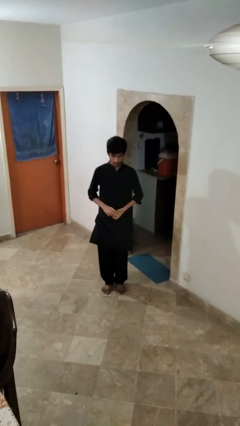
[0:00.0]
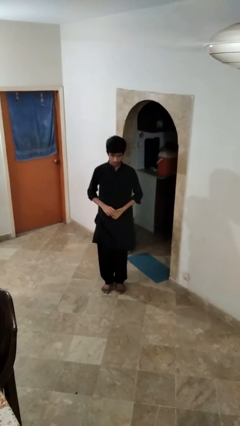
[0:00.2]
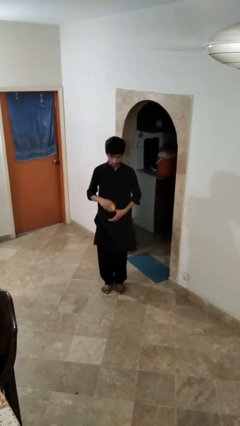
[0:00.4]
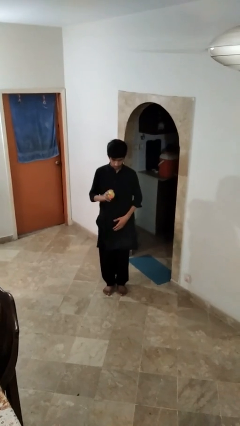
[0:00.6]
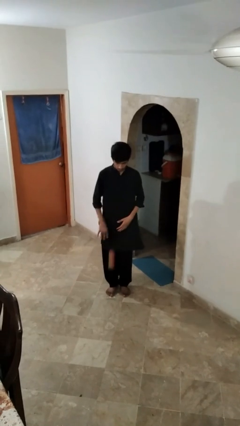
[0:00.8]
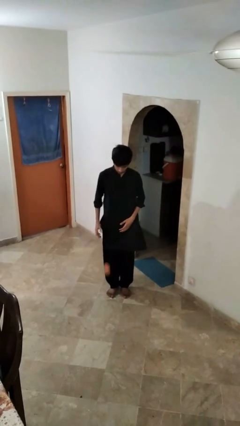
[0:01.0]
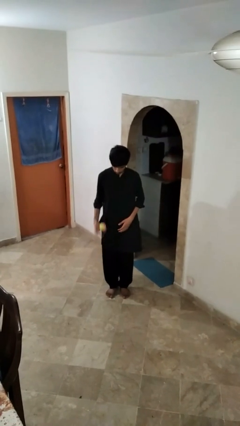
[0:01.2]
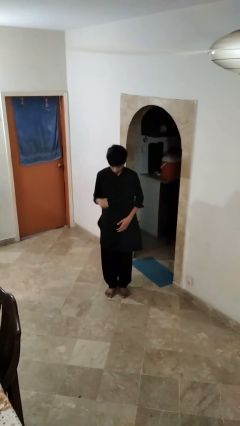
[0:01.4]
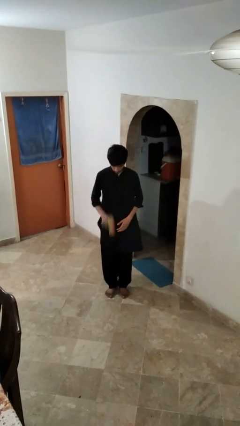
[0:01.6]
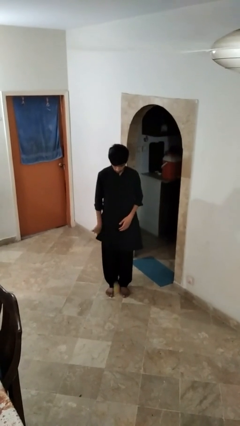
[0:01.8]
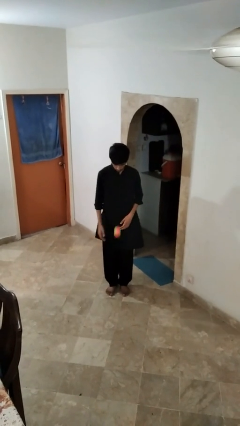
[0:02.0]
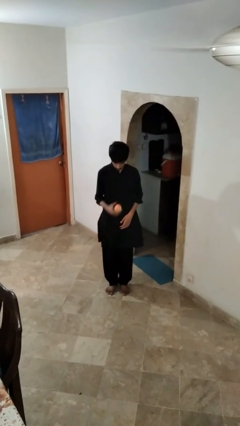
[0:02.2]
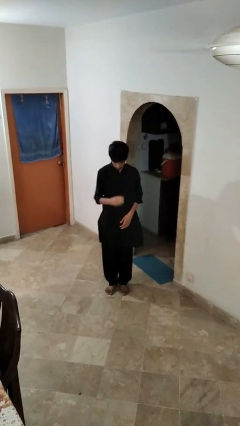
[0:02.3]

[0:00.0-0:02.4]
person bounces ball on floor

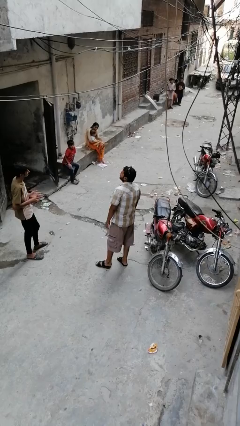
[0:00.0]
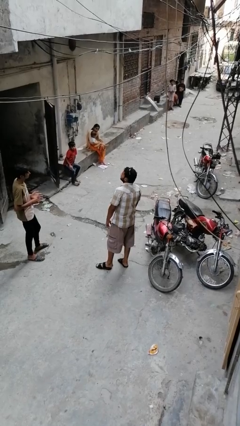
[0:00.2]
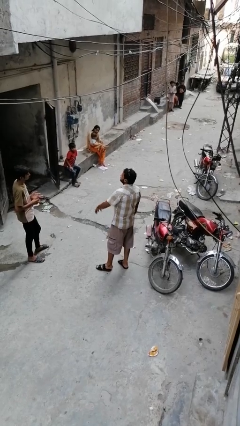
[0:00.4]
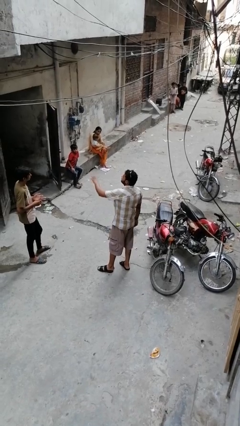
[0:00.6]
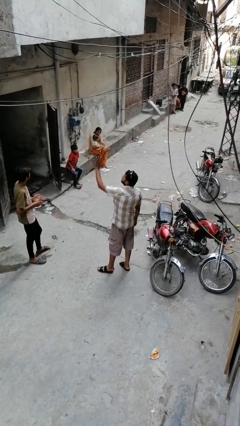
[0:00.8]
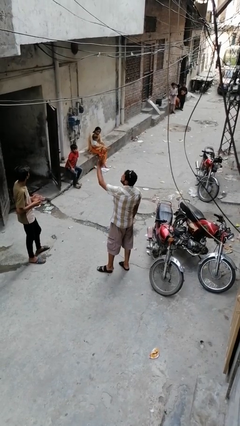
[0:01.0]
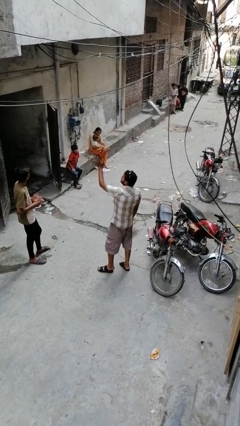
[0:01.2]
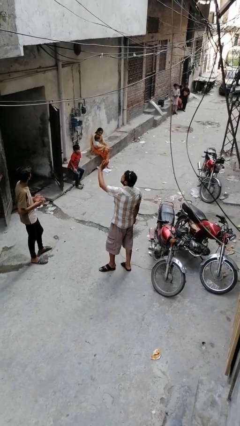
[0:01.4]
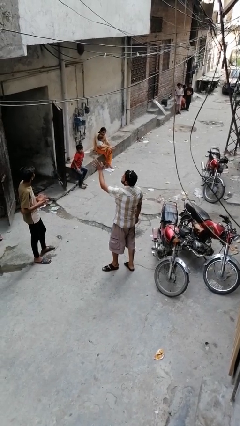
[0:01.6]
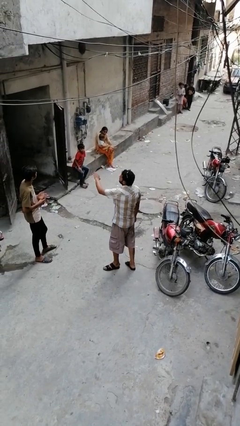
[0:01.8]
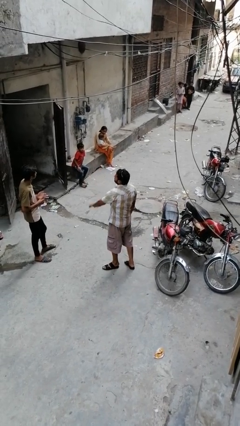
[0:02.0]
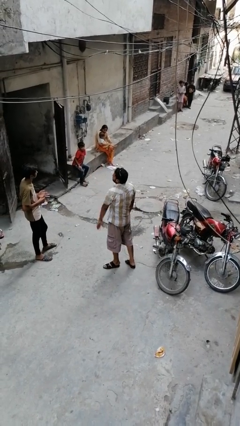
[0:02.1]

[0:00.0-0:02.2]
person waves at person

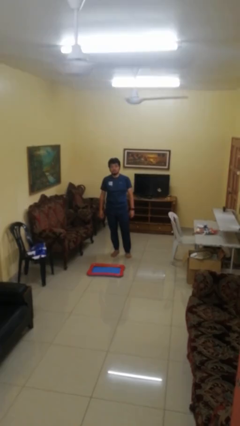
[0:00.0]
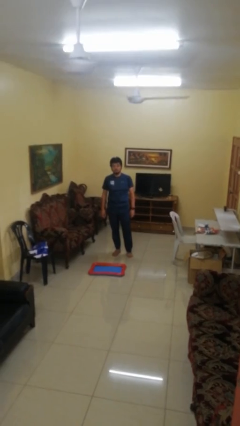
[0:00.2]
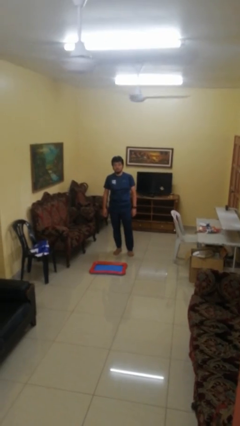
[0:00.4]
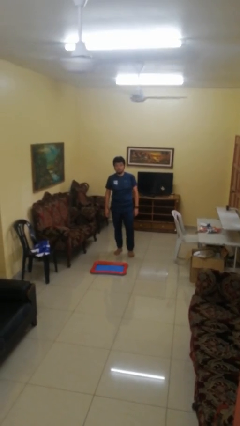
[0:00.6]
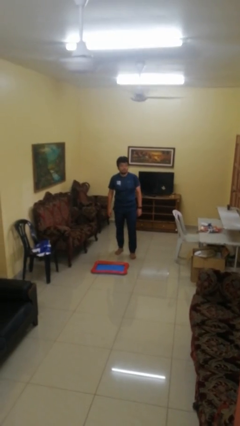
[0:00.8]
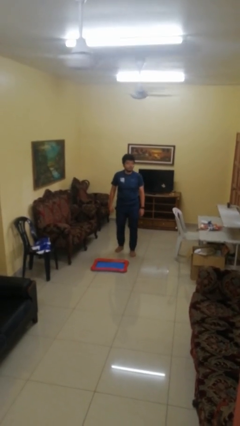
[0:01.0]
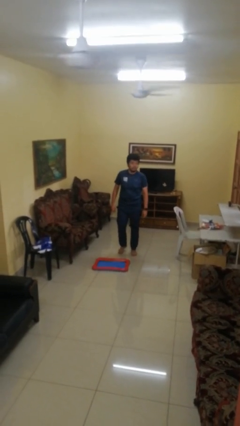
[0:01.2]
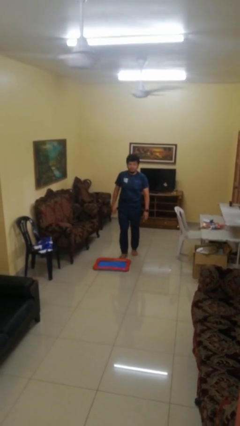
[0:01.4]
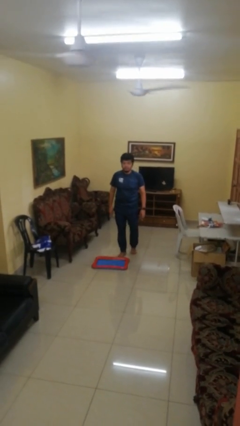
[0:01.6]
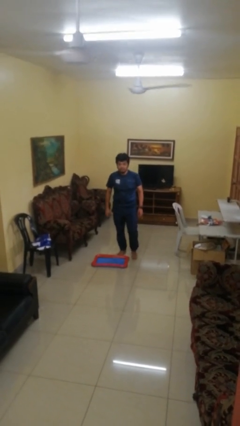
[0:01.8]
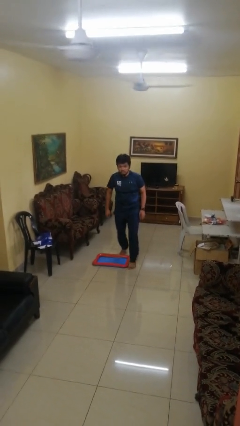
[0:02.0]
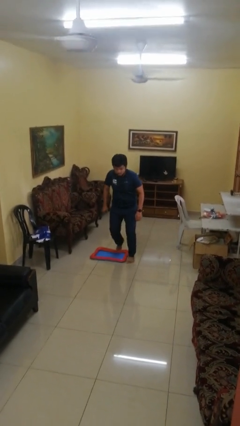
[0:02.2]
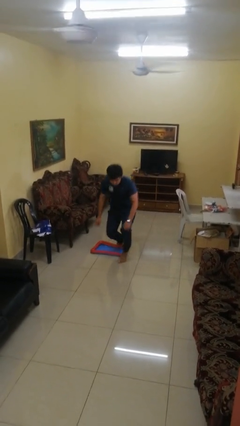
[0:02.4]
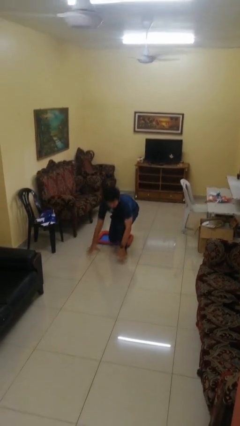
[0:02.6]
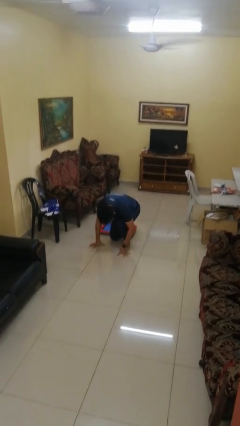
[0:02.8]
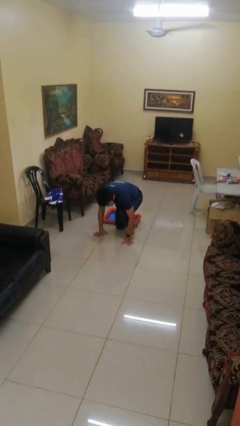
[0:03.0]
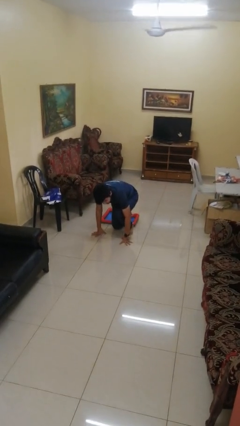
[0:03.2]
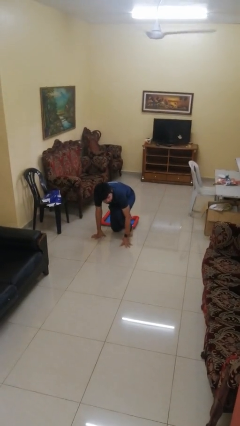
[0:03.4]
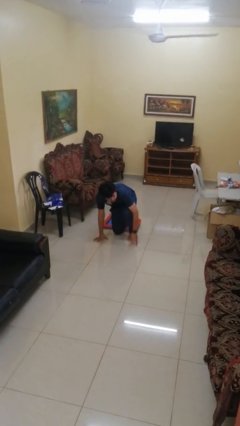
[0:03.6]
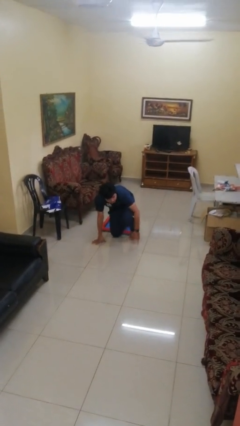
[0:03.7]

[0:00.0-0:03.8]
person trips on object on floor

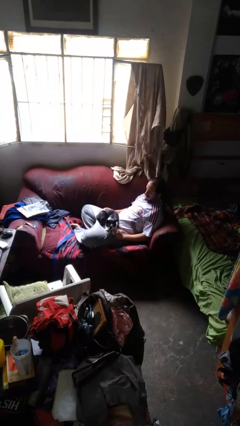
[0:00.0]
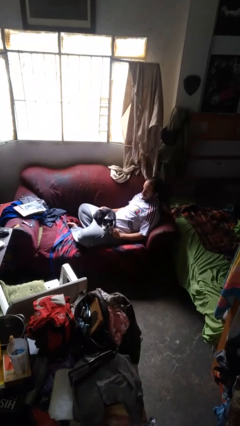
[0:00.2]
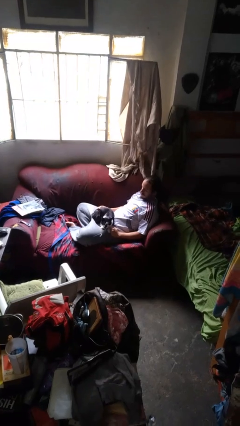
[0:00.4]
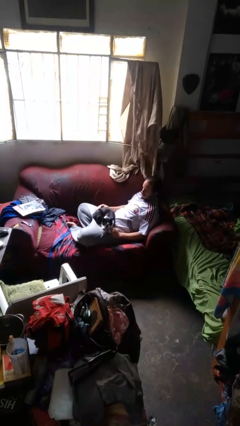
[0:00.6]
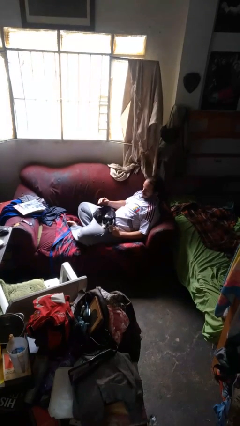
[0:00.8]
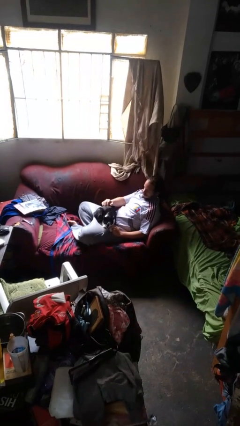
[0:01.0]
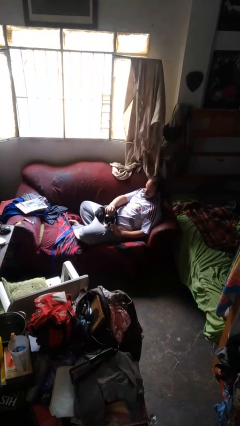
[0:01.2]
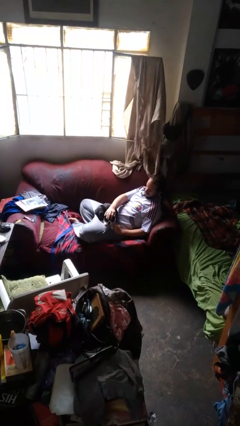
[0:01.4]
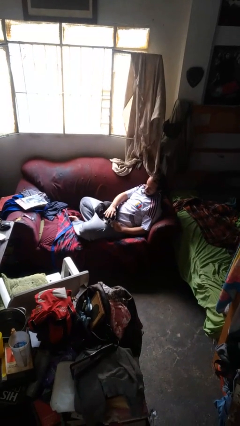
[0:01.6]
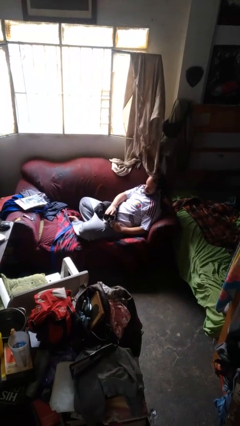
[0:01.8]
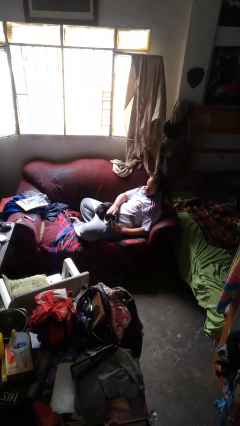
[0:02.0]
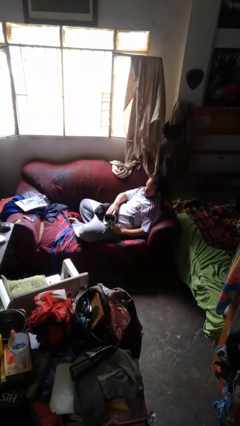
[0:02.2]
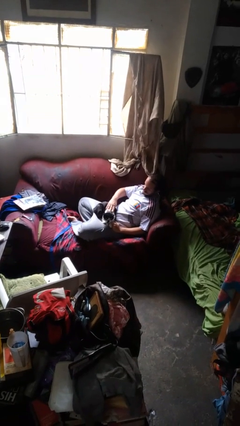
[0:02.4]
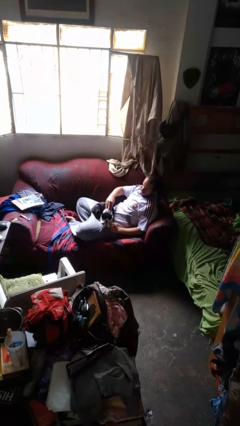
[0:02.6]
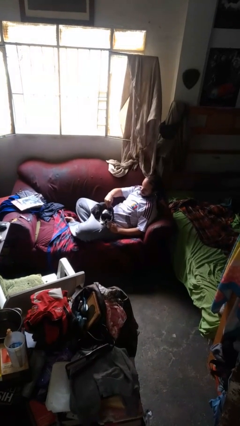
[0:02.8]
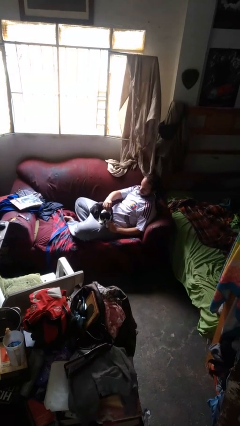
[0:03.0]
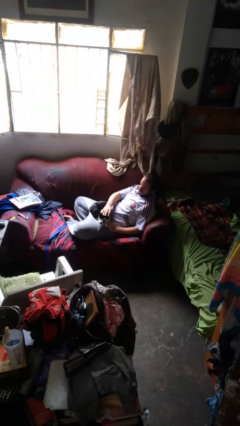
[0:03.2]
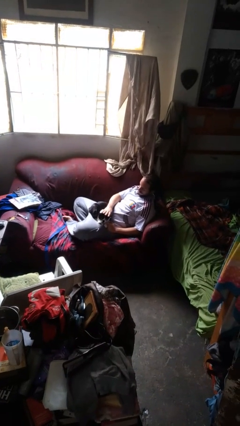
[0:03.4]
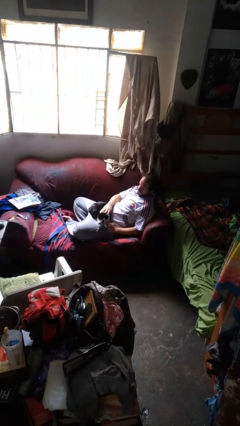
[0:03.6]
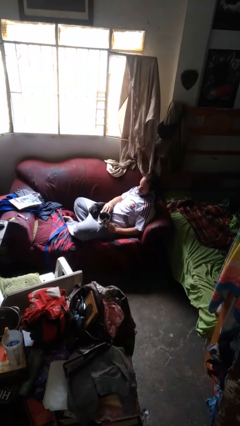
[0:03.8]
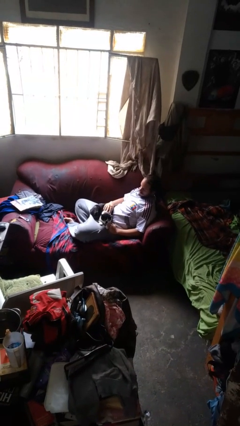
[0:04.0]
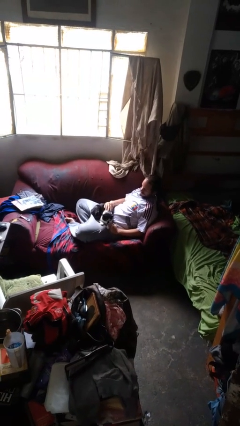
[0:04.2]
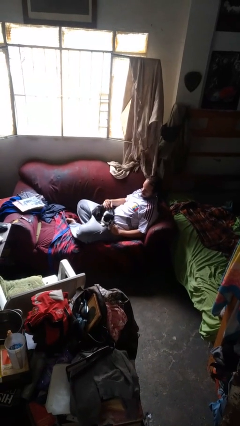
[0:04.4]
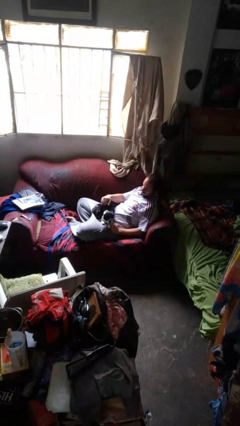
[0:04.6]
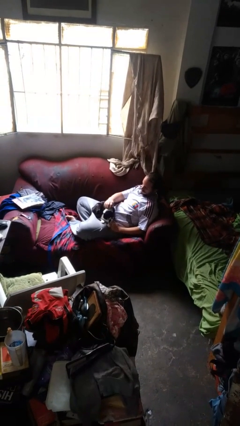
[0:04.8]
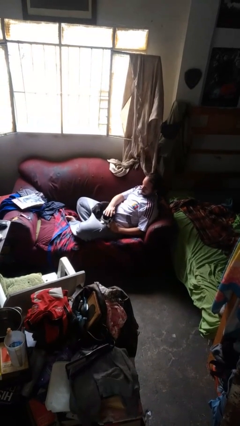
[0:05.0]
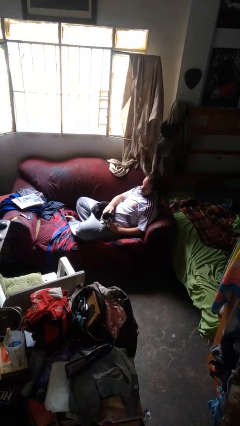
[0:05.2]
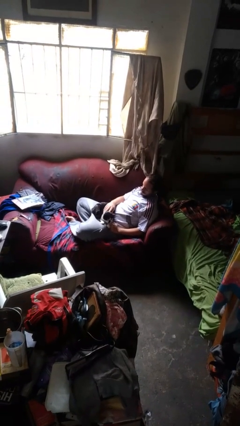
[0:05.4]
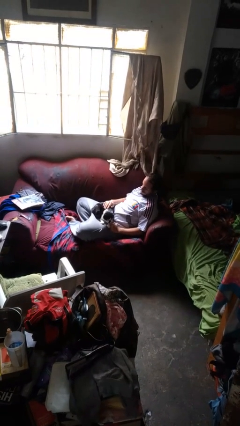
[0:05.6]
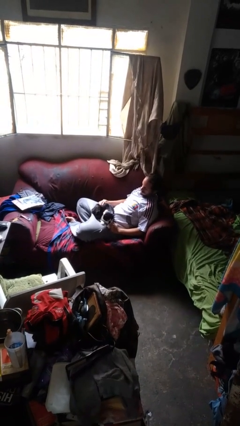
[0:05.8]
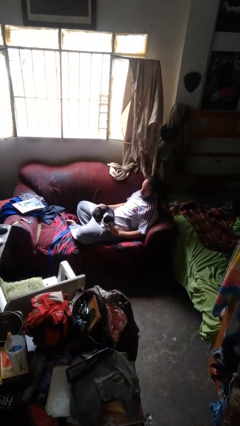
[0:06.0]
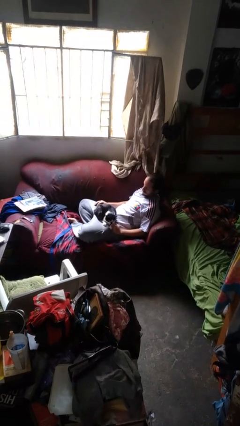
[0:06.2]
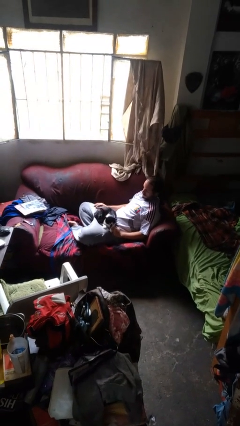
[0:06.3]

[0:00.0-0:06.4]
person pets cat

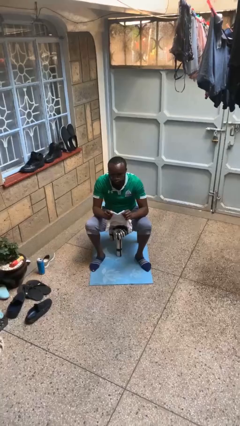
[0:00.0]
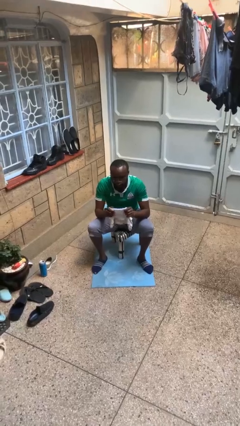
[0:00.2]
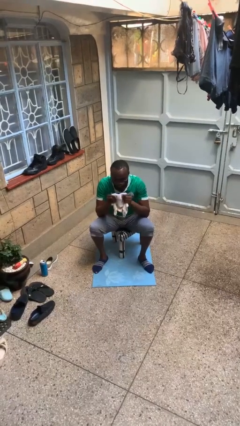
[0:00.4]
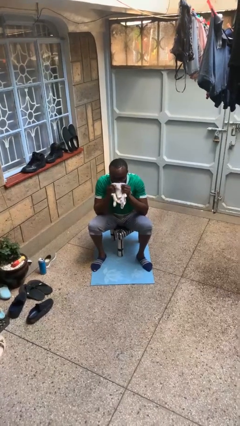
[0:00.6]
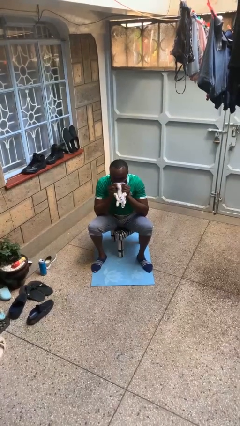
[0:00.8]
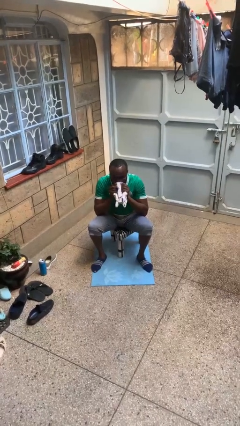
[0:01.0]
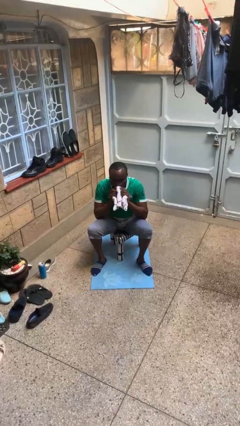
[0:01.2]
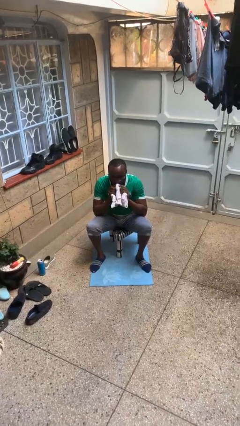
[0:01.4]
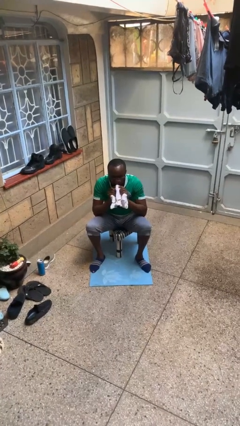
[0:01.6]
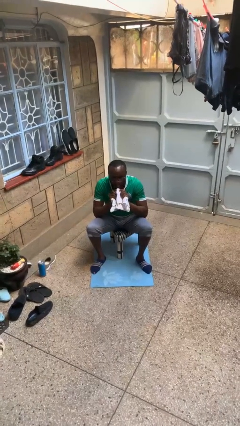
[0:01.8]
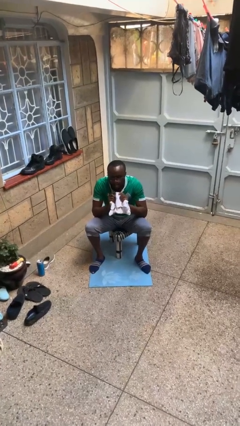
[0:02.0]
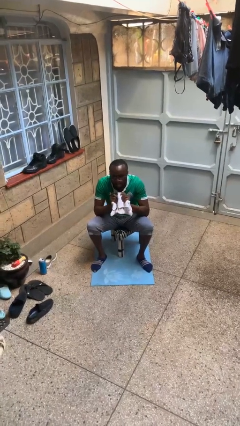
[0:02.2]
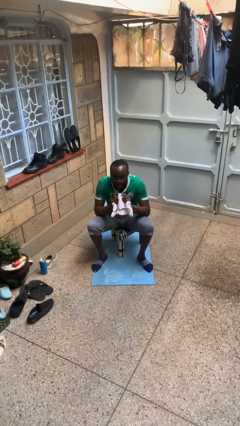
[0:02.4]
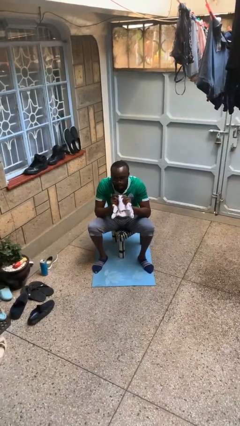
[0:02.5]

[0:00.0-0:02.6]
person wipes mouth with napkin
